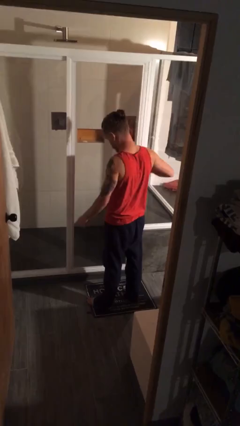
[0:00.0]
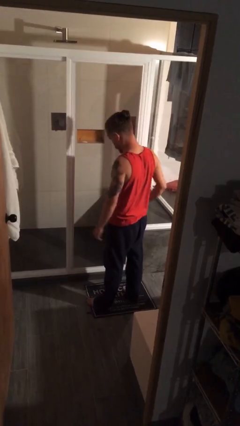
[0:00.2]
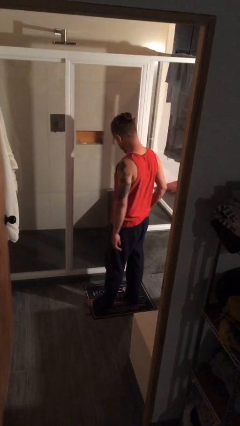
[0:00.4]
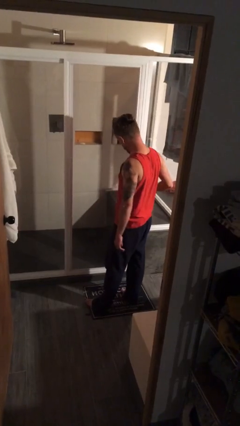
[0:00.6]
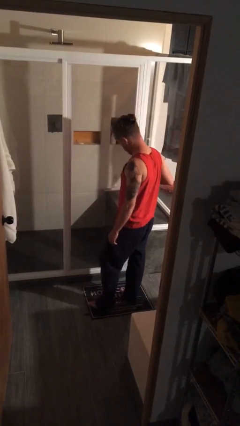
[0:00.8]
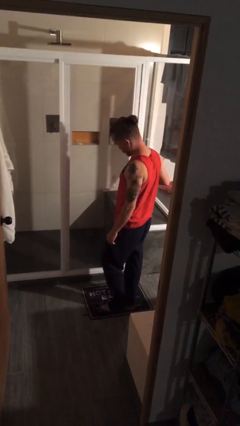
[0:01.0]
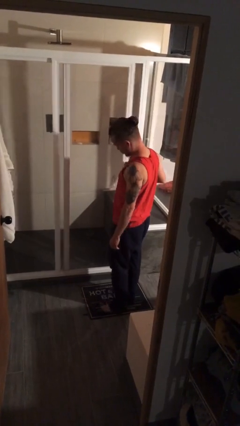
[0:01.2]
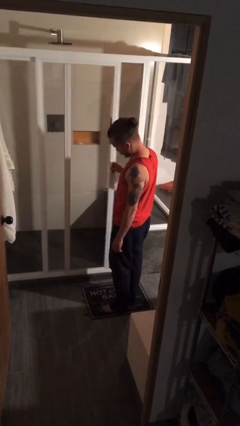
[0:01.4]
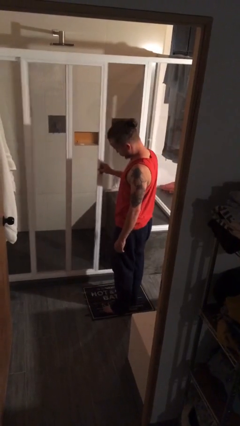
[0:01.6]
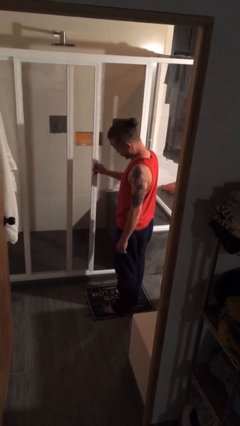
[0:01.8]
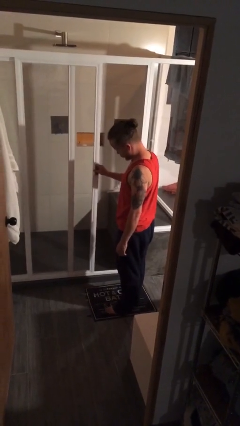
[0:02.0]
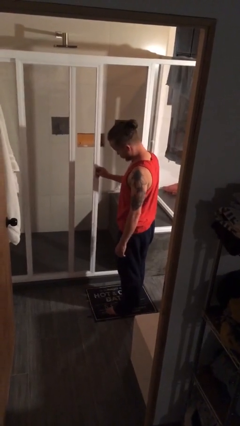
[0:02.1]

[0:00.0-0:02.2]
person opens sliding door

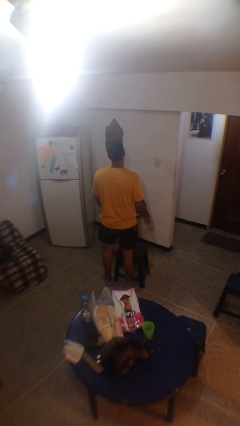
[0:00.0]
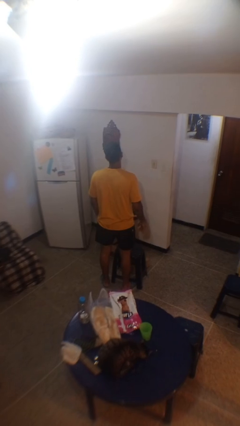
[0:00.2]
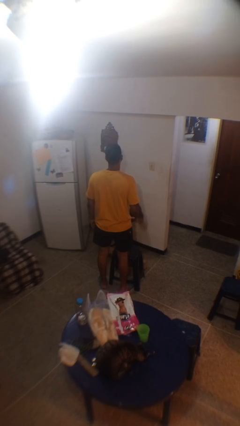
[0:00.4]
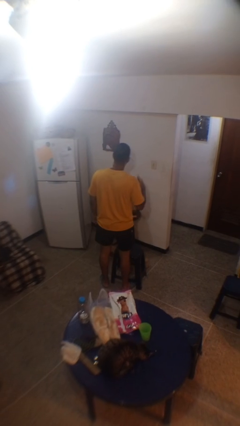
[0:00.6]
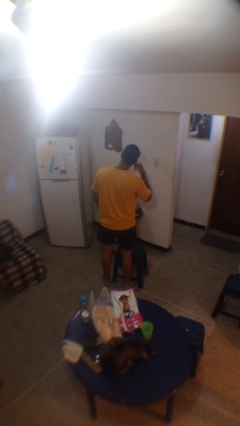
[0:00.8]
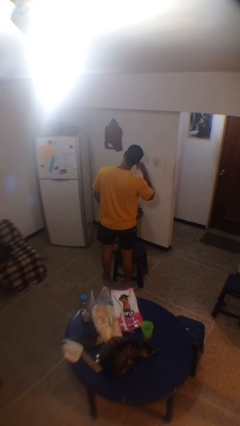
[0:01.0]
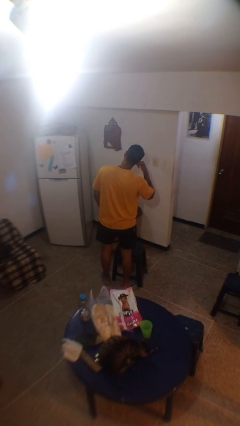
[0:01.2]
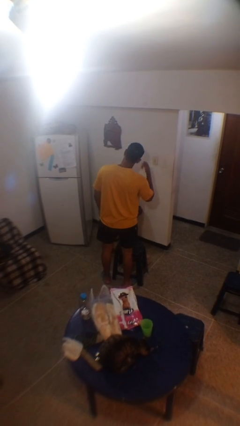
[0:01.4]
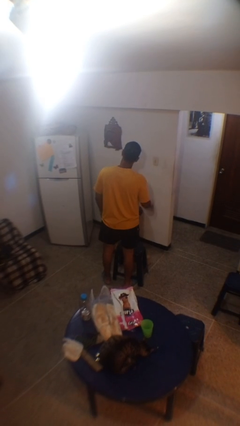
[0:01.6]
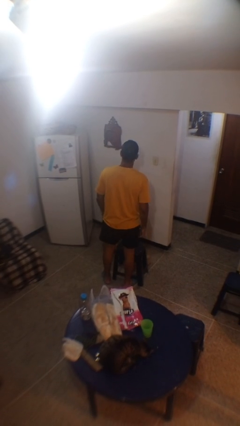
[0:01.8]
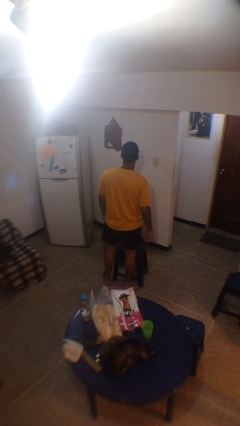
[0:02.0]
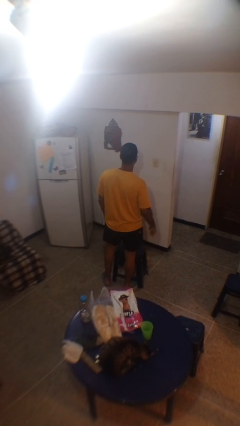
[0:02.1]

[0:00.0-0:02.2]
person gestures call me

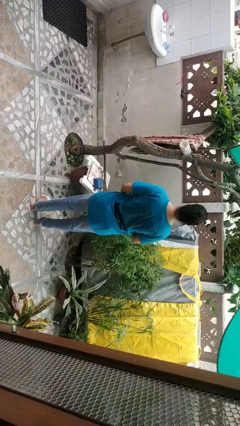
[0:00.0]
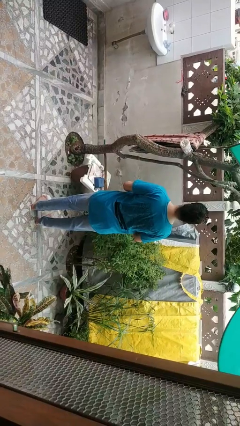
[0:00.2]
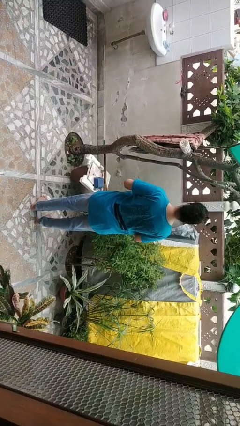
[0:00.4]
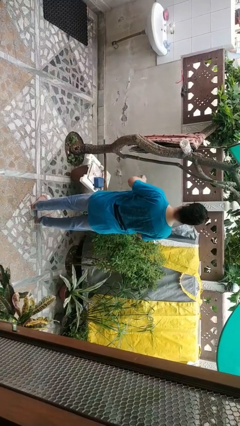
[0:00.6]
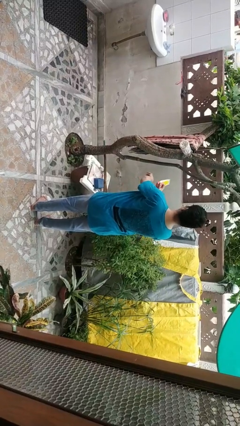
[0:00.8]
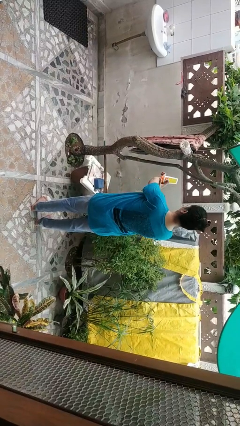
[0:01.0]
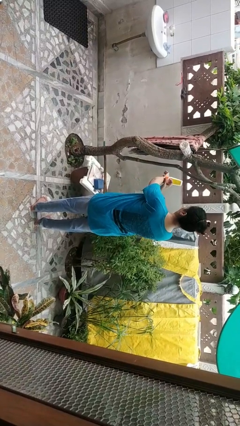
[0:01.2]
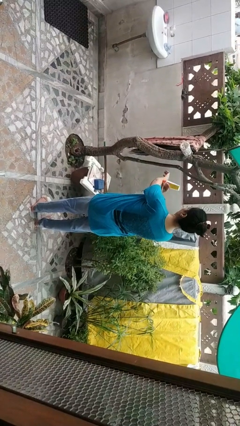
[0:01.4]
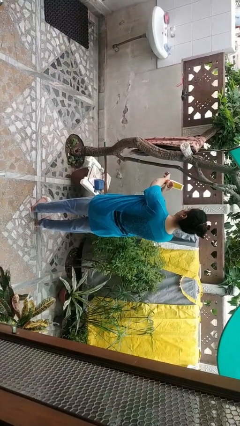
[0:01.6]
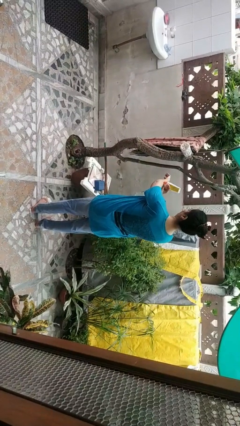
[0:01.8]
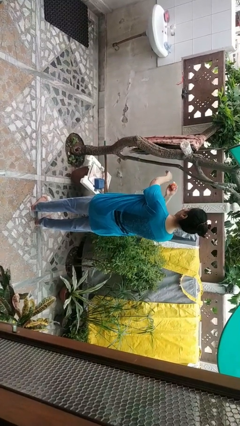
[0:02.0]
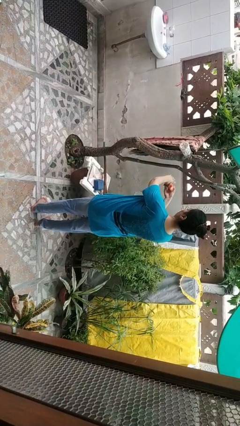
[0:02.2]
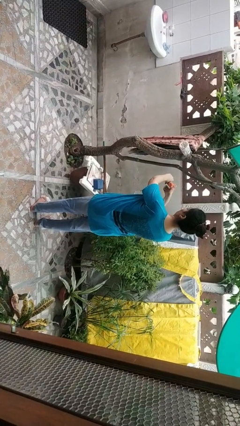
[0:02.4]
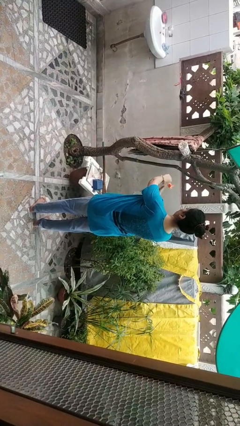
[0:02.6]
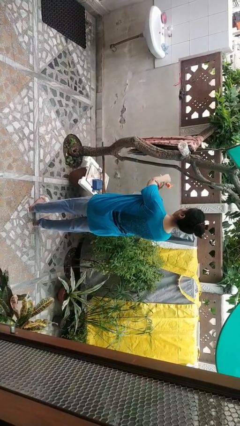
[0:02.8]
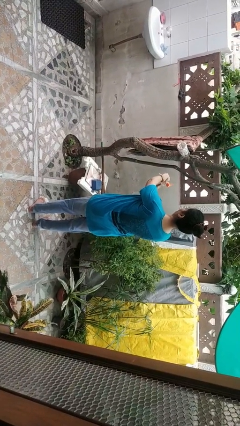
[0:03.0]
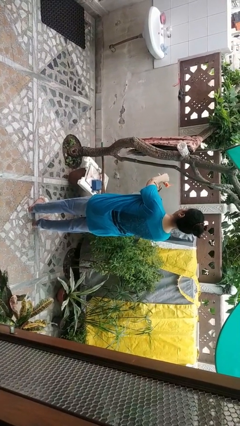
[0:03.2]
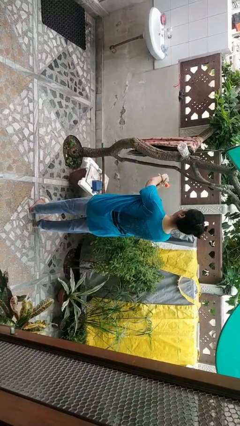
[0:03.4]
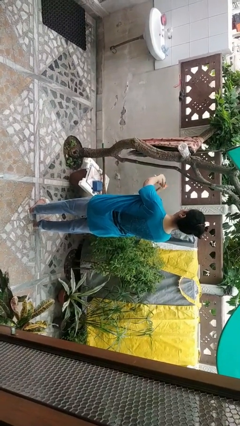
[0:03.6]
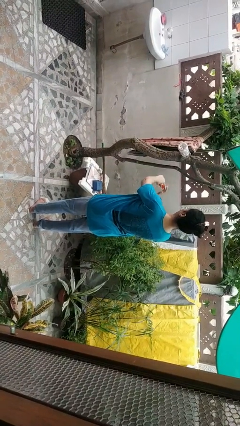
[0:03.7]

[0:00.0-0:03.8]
person applies sunscreen

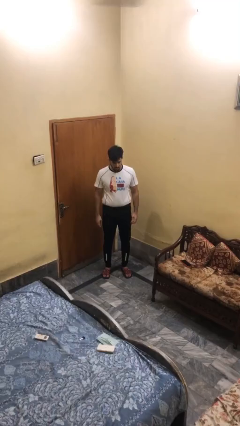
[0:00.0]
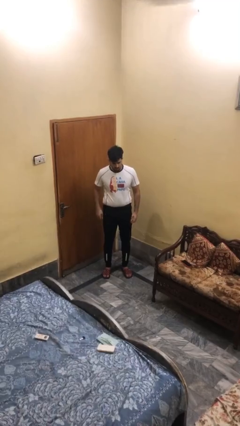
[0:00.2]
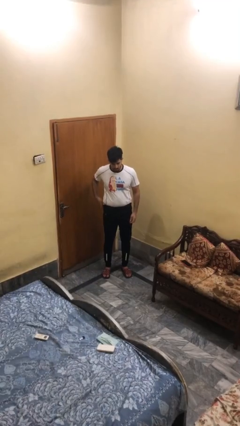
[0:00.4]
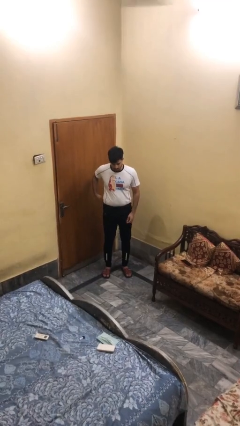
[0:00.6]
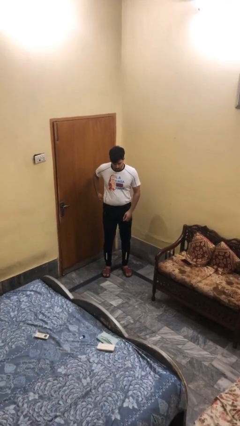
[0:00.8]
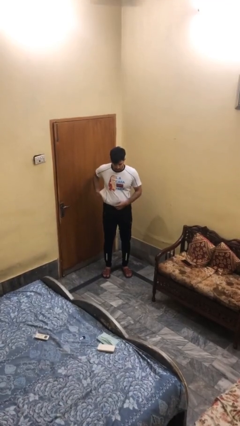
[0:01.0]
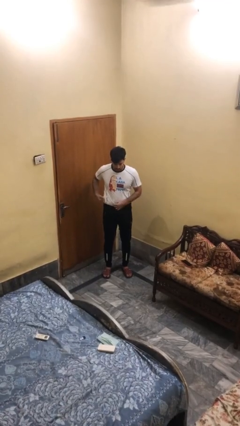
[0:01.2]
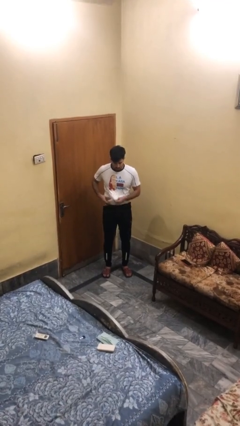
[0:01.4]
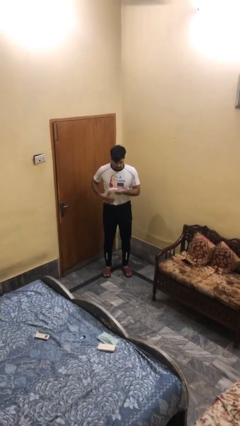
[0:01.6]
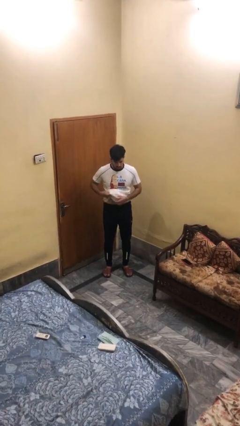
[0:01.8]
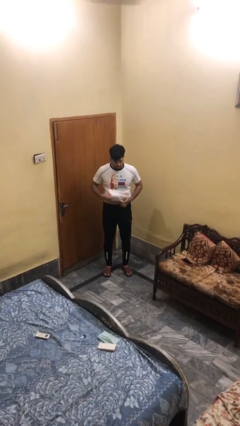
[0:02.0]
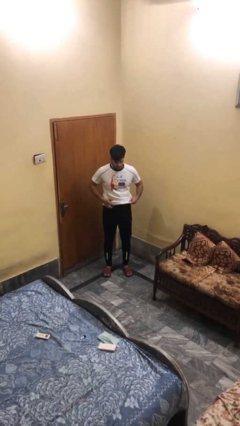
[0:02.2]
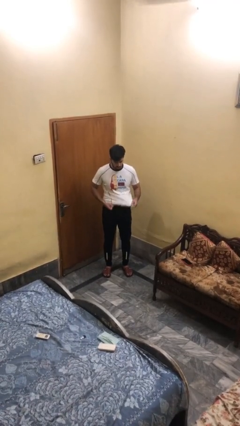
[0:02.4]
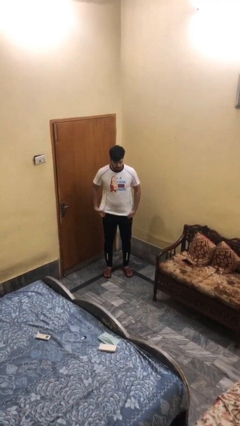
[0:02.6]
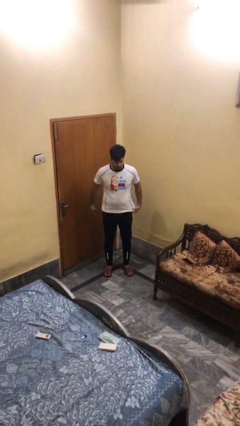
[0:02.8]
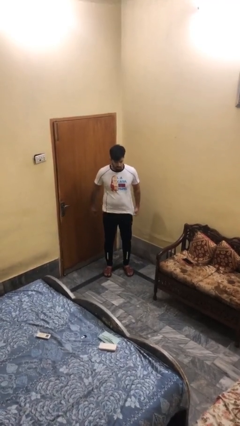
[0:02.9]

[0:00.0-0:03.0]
person untucks shirt

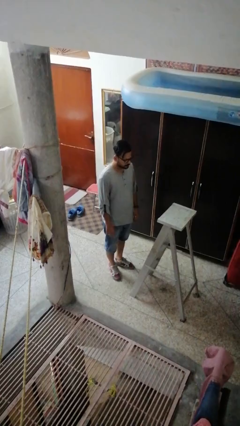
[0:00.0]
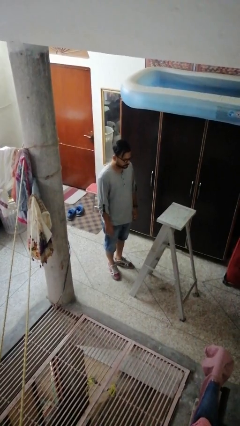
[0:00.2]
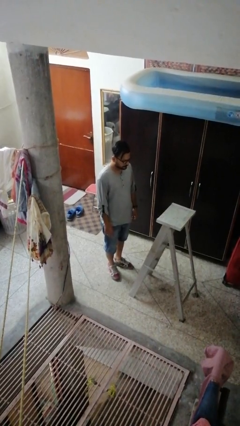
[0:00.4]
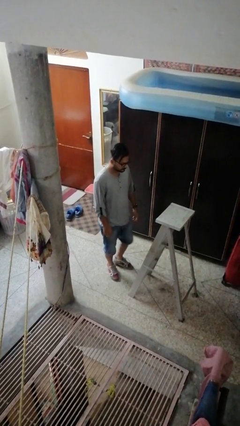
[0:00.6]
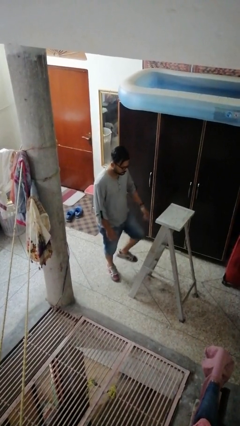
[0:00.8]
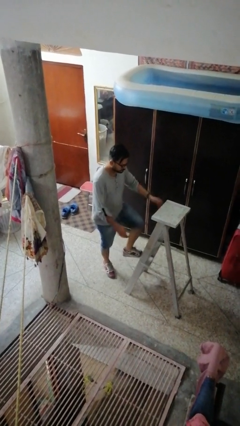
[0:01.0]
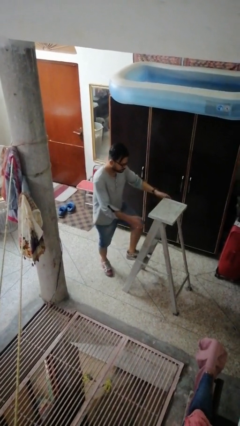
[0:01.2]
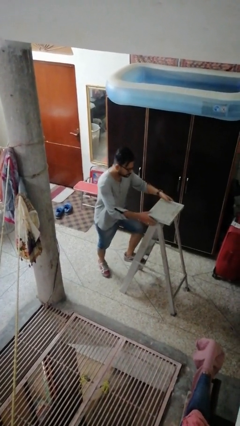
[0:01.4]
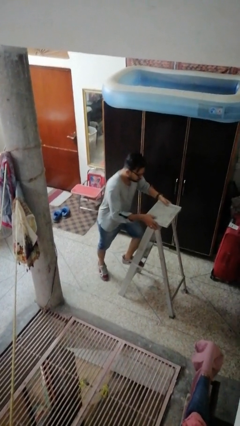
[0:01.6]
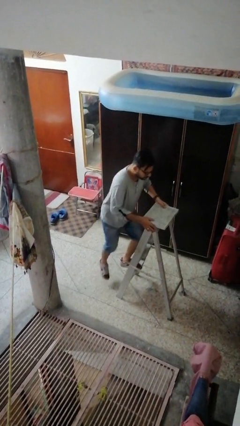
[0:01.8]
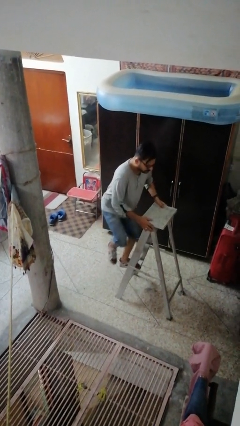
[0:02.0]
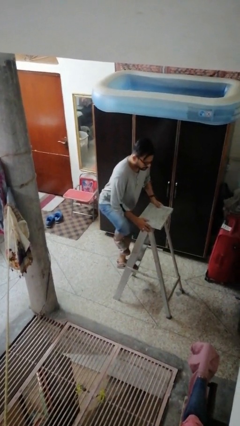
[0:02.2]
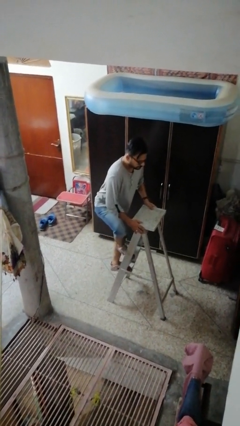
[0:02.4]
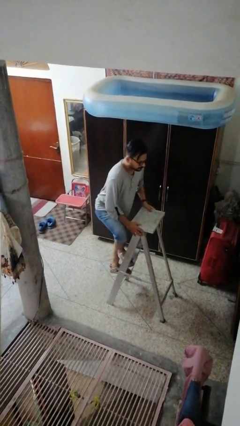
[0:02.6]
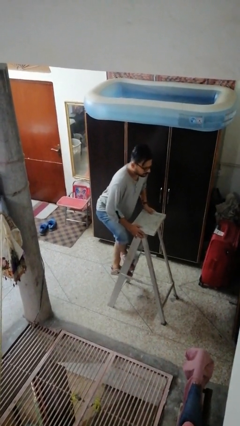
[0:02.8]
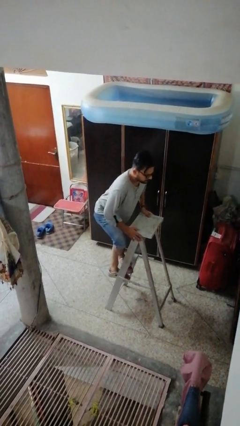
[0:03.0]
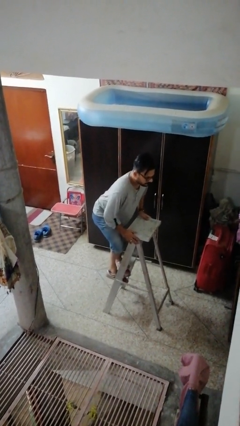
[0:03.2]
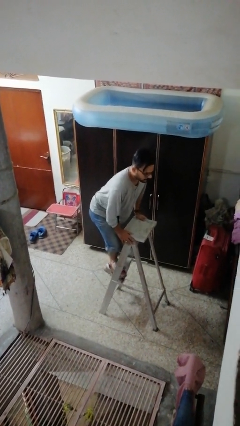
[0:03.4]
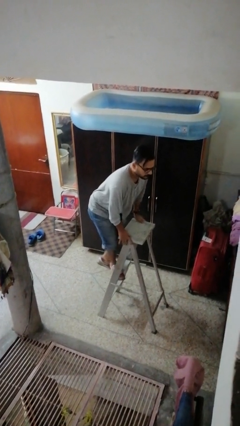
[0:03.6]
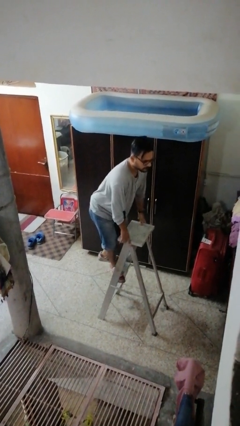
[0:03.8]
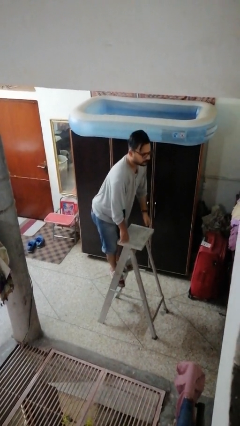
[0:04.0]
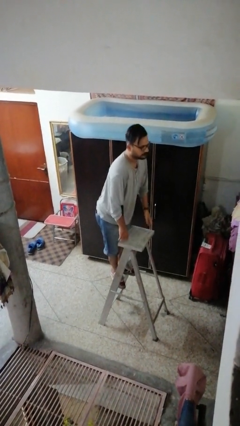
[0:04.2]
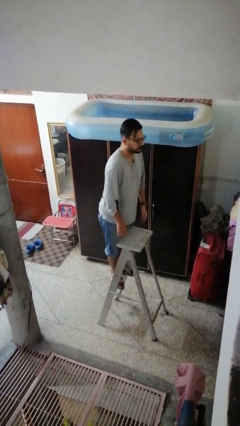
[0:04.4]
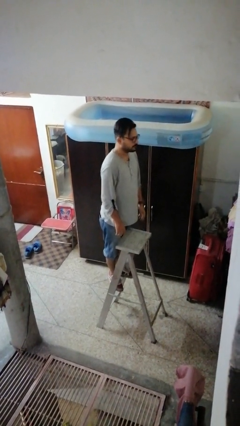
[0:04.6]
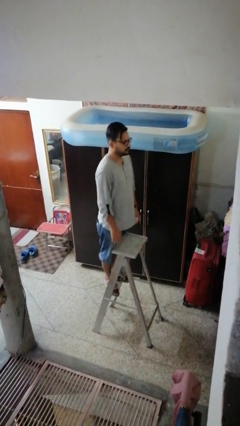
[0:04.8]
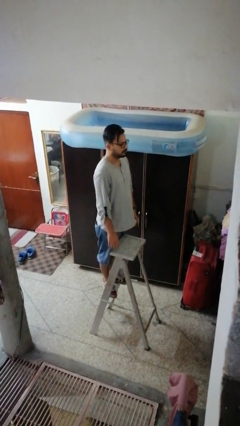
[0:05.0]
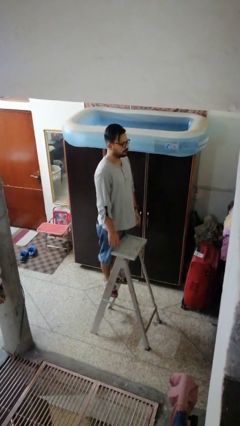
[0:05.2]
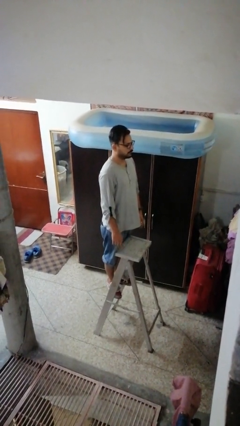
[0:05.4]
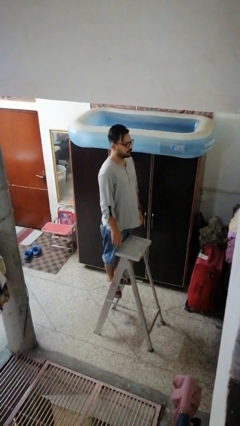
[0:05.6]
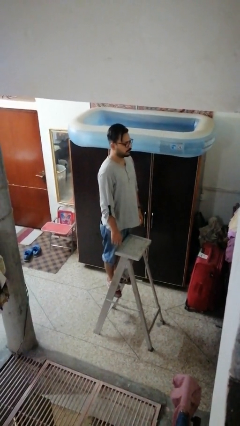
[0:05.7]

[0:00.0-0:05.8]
person climbs up ladder

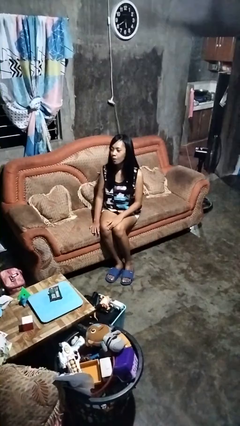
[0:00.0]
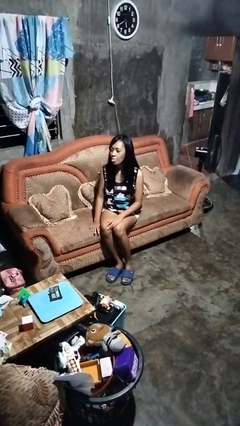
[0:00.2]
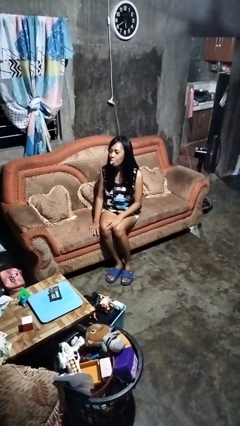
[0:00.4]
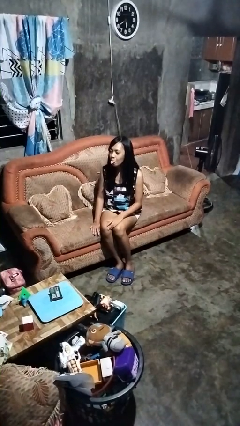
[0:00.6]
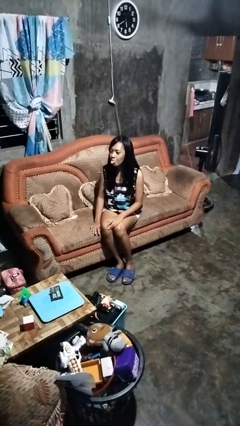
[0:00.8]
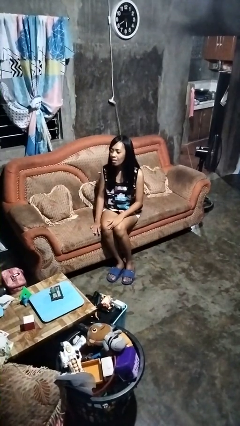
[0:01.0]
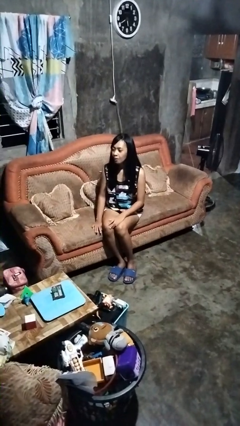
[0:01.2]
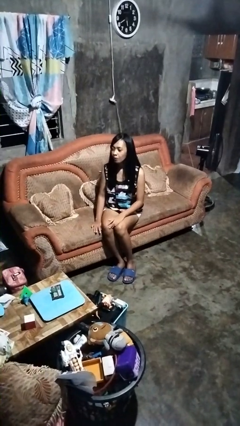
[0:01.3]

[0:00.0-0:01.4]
person sticks out tongue
